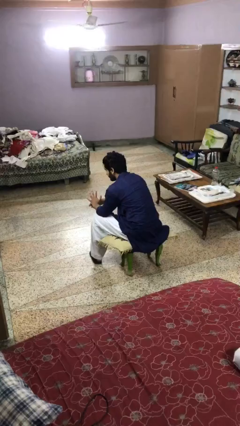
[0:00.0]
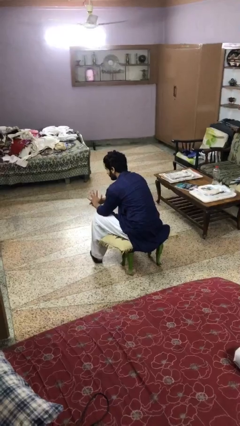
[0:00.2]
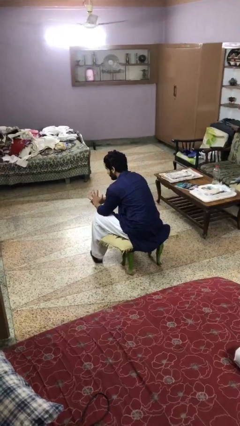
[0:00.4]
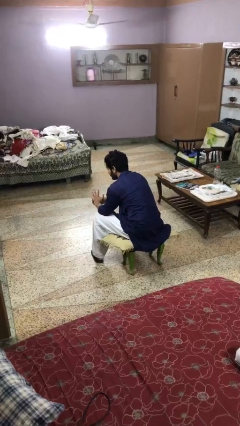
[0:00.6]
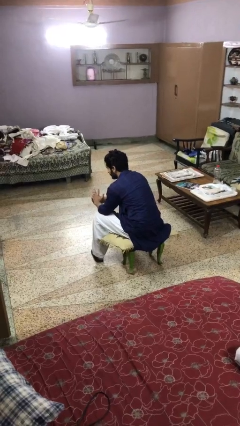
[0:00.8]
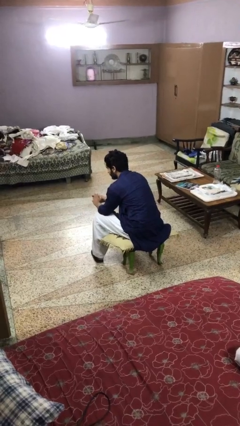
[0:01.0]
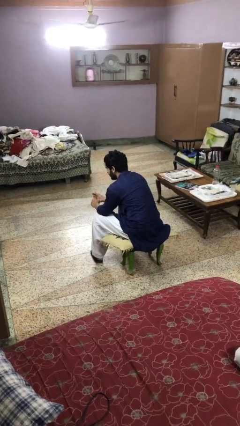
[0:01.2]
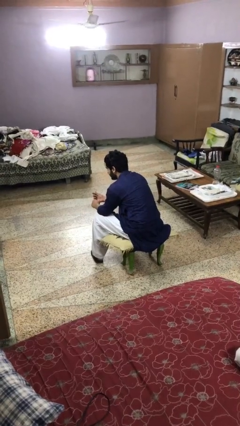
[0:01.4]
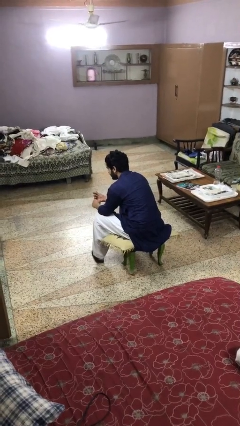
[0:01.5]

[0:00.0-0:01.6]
person takes off ring

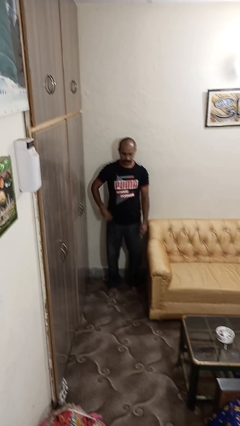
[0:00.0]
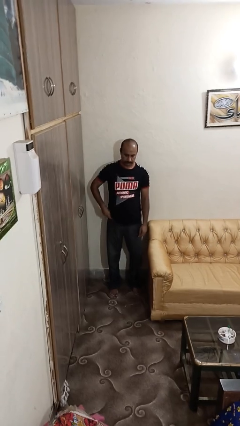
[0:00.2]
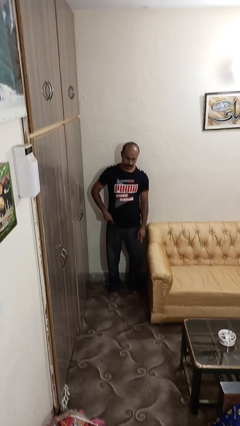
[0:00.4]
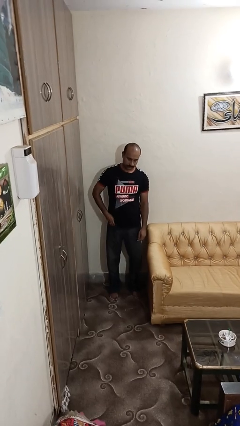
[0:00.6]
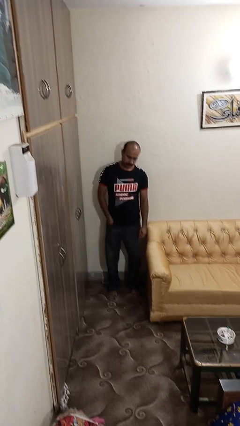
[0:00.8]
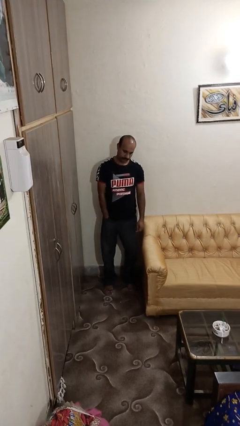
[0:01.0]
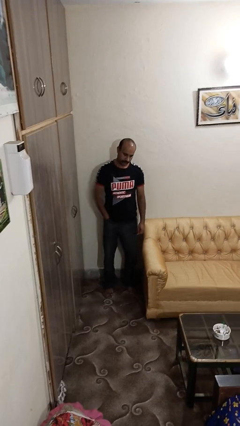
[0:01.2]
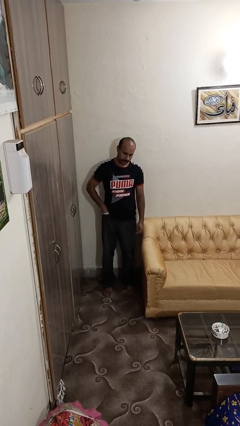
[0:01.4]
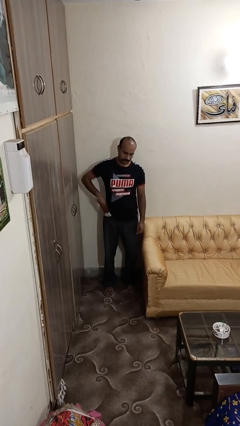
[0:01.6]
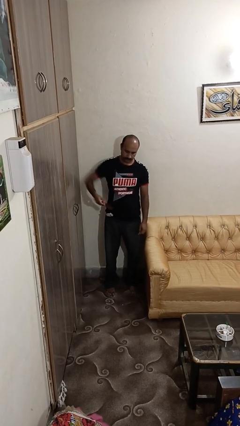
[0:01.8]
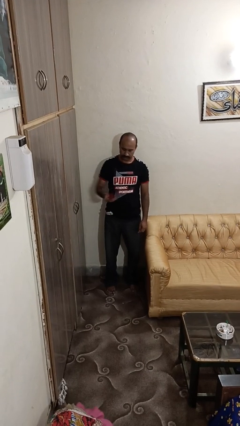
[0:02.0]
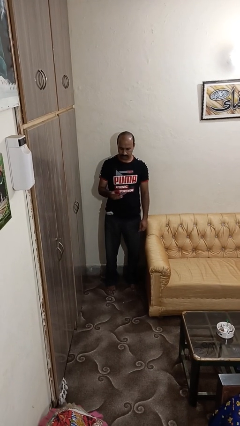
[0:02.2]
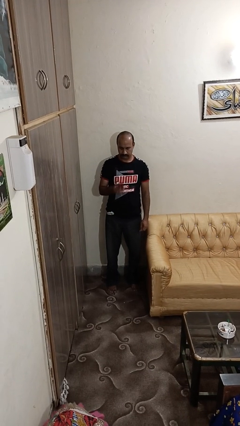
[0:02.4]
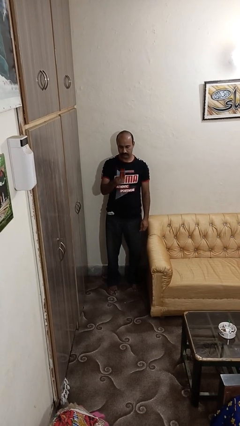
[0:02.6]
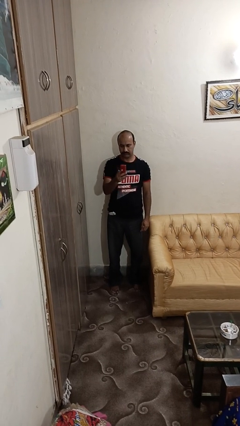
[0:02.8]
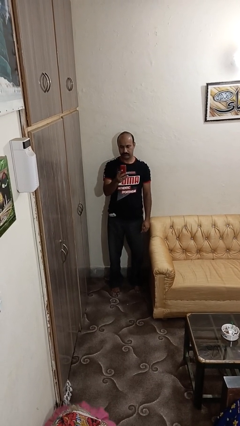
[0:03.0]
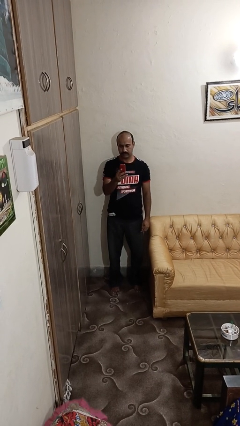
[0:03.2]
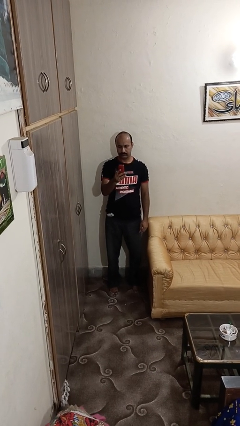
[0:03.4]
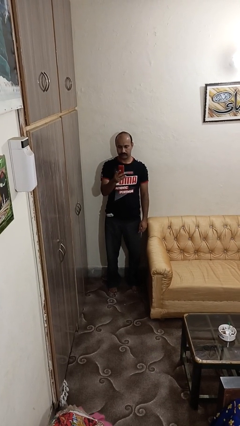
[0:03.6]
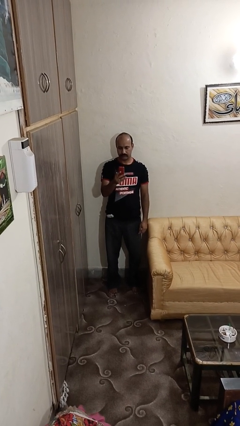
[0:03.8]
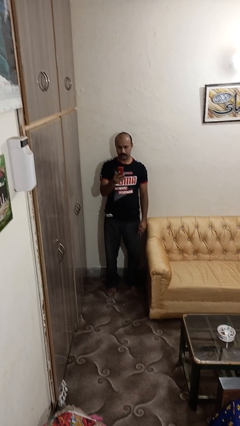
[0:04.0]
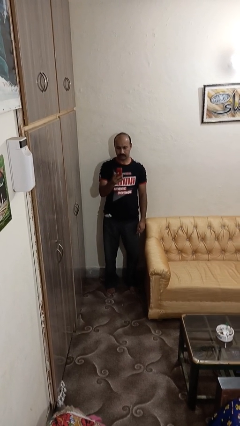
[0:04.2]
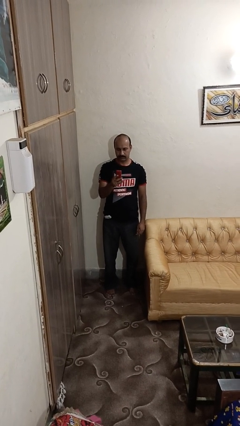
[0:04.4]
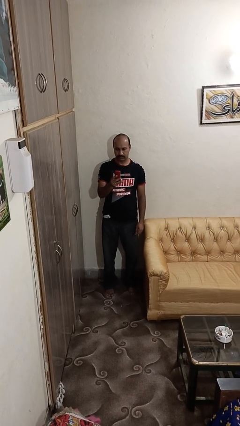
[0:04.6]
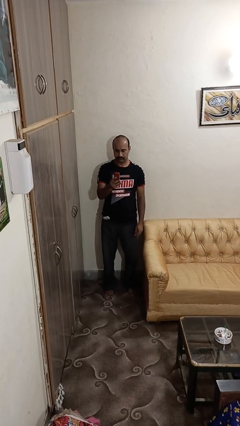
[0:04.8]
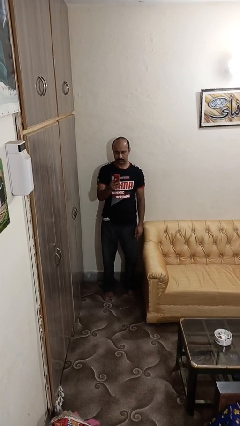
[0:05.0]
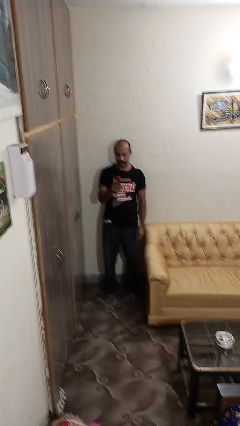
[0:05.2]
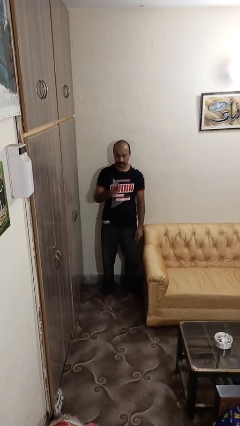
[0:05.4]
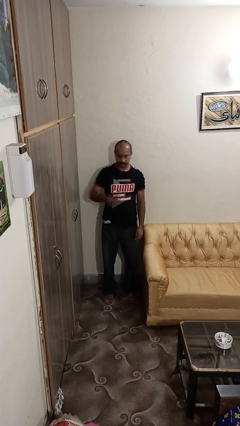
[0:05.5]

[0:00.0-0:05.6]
person takes phone from pocket

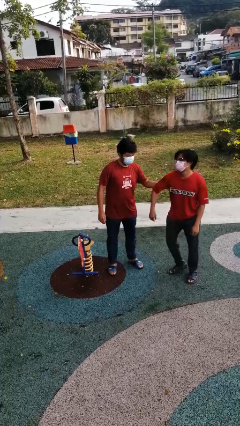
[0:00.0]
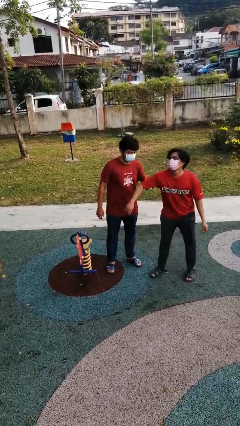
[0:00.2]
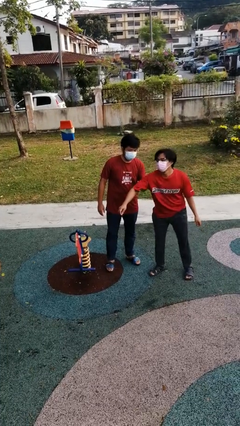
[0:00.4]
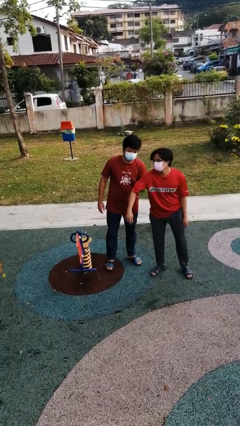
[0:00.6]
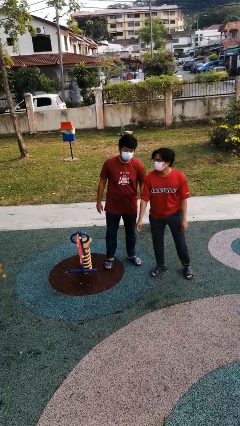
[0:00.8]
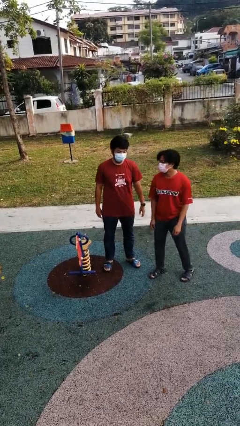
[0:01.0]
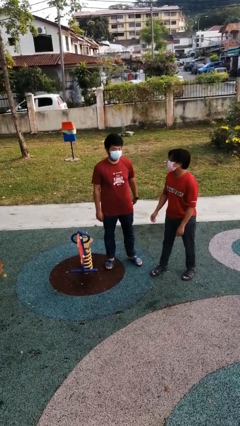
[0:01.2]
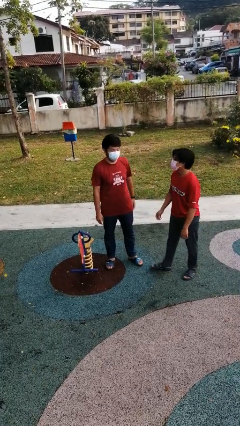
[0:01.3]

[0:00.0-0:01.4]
person grabs person by bicep

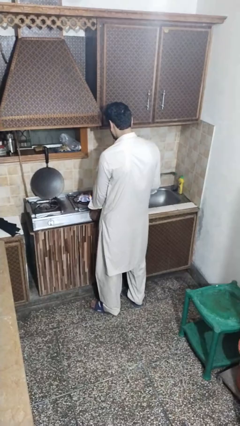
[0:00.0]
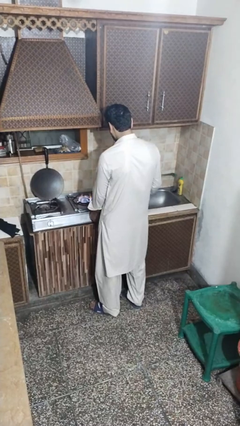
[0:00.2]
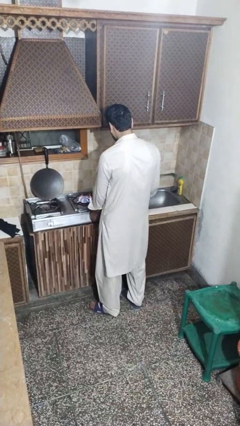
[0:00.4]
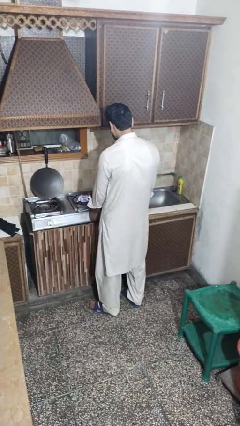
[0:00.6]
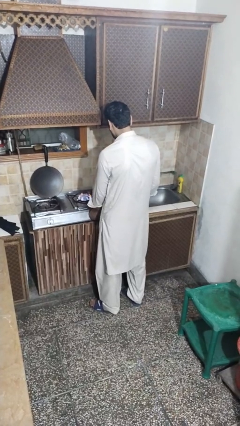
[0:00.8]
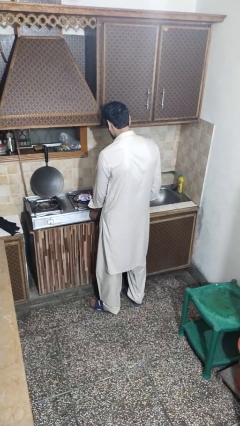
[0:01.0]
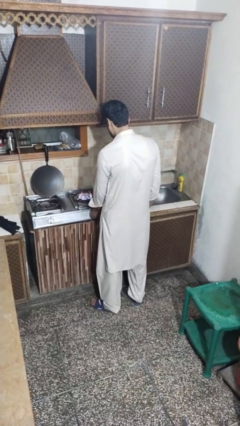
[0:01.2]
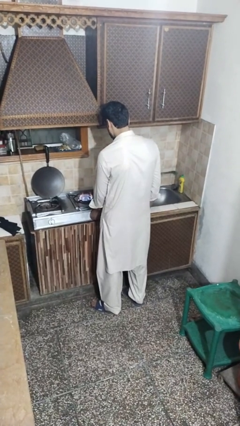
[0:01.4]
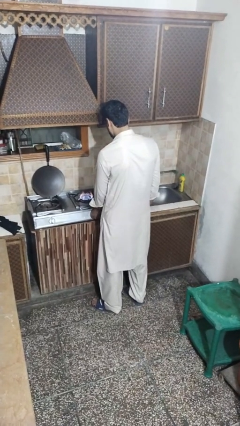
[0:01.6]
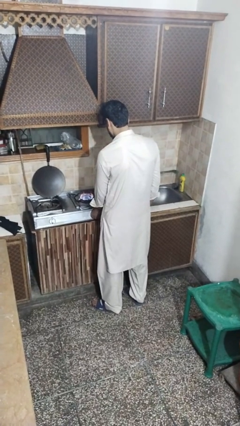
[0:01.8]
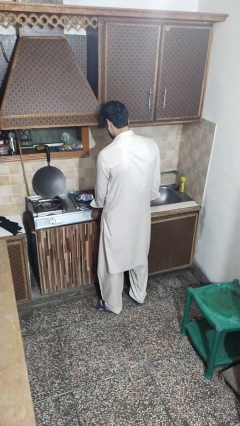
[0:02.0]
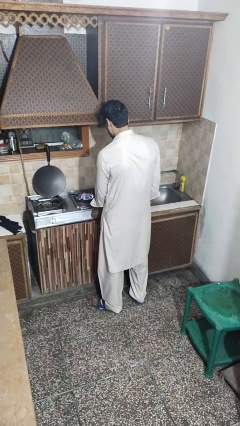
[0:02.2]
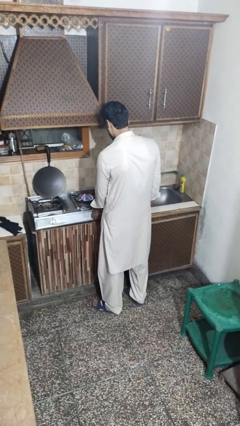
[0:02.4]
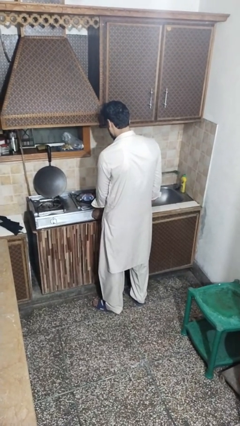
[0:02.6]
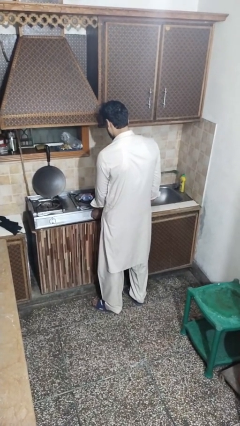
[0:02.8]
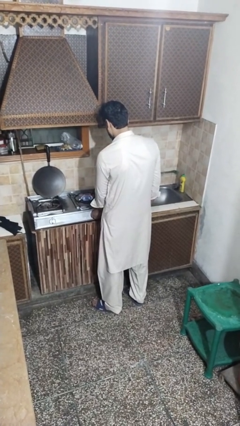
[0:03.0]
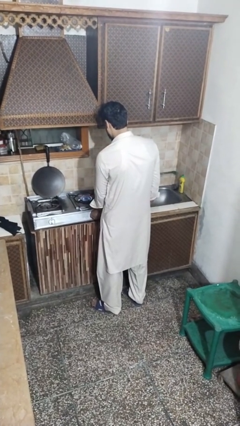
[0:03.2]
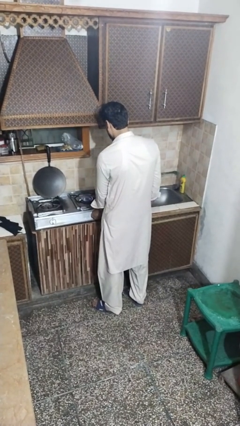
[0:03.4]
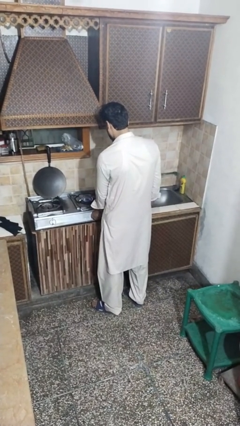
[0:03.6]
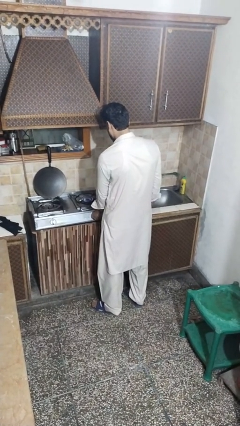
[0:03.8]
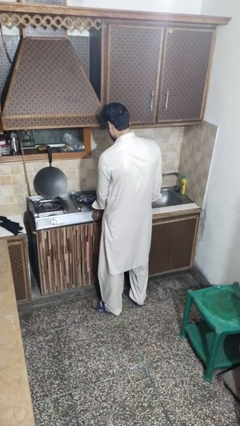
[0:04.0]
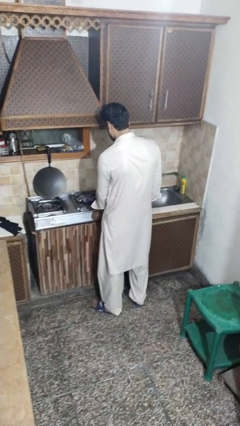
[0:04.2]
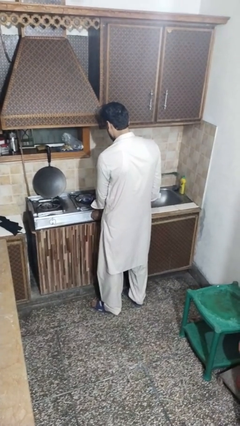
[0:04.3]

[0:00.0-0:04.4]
person turns off stovetop

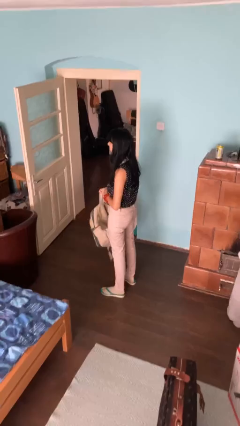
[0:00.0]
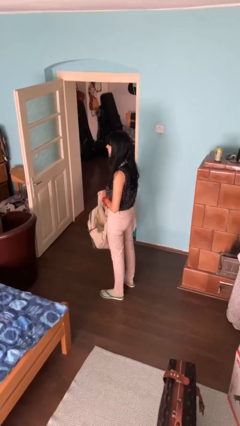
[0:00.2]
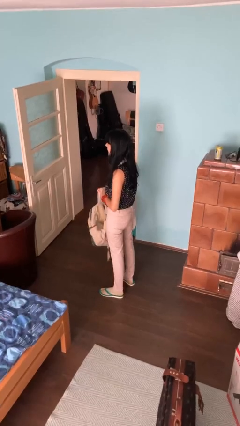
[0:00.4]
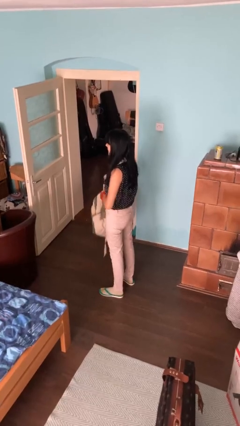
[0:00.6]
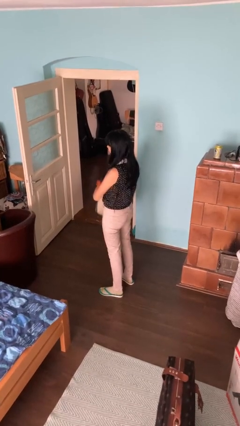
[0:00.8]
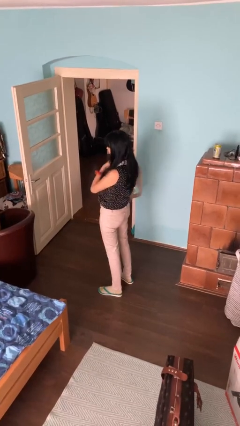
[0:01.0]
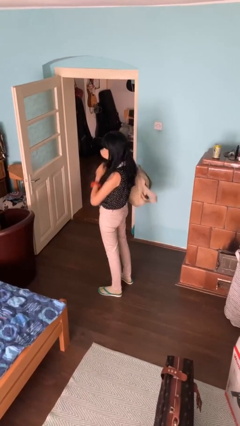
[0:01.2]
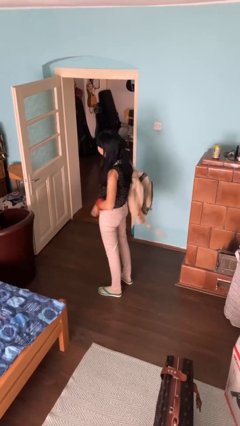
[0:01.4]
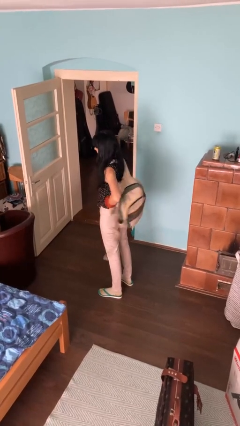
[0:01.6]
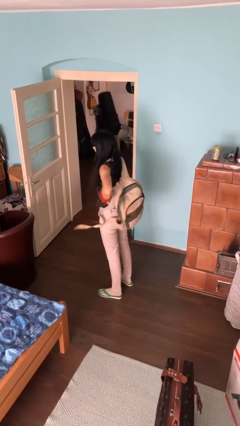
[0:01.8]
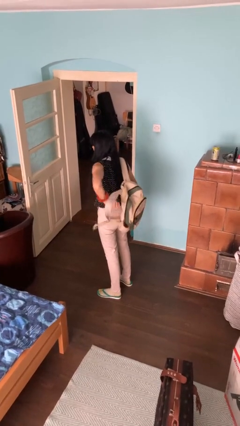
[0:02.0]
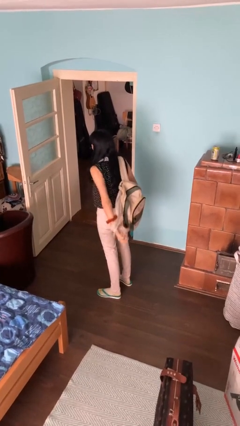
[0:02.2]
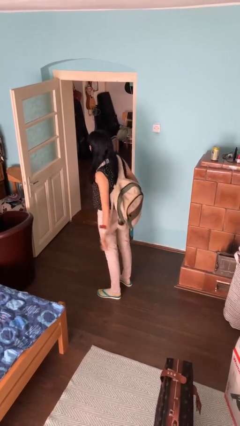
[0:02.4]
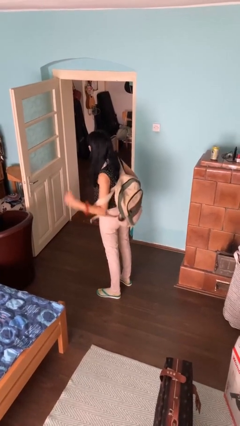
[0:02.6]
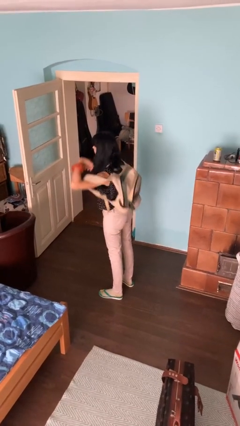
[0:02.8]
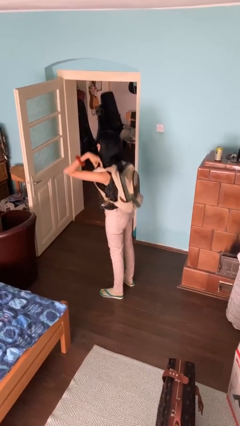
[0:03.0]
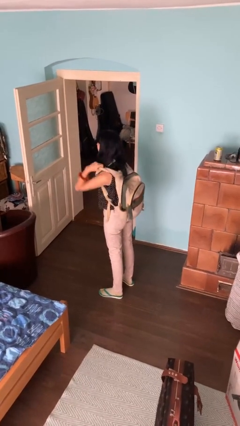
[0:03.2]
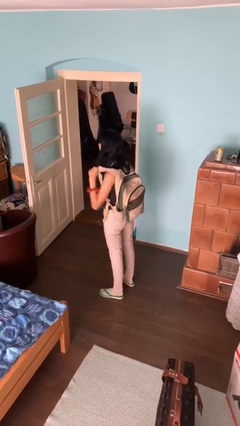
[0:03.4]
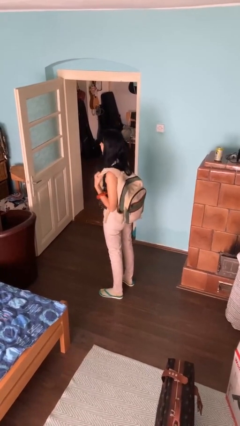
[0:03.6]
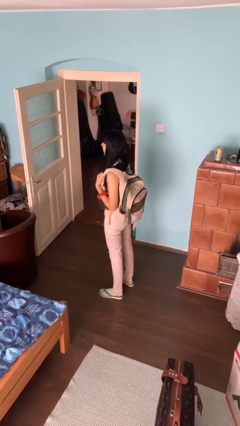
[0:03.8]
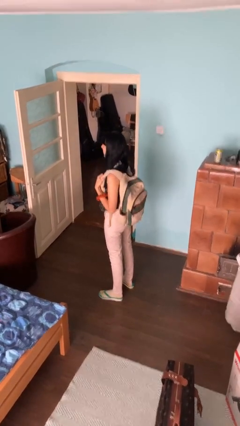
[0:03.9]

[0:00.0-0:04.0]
person puts on backpack

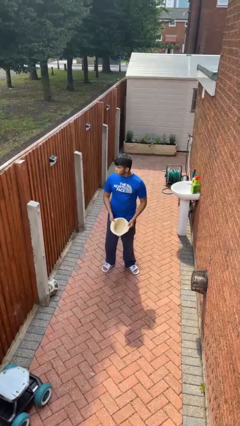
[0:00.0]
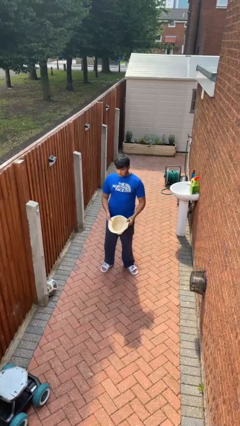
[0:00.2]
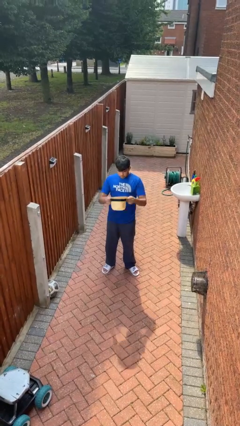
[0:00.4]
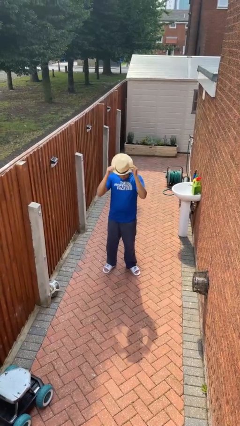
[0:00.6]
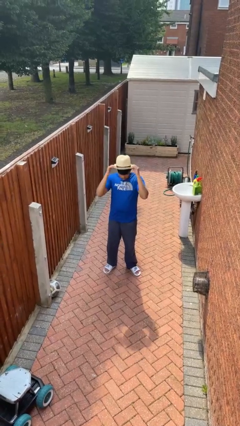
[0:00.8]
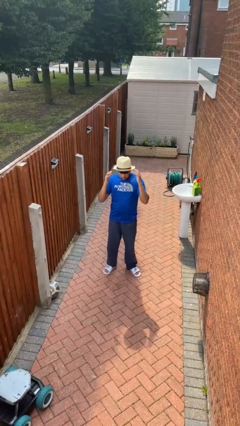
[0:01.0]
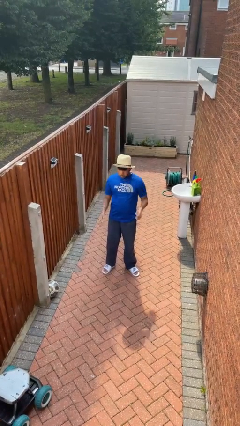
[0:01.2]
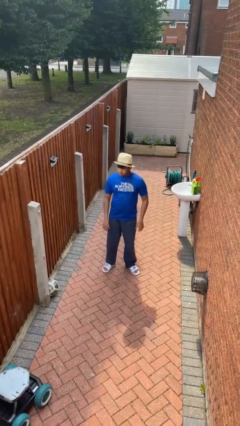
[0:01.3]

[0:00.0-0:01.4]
person puts on hat
